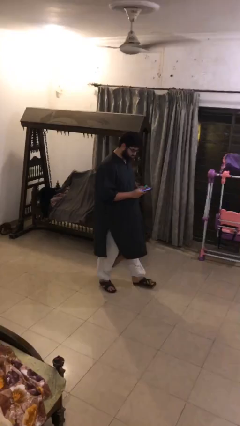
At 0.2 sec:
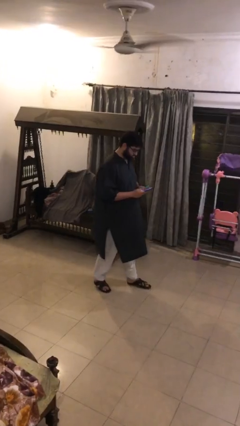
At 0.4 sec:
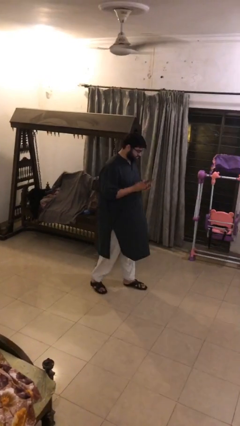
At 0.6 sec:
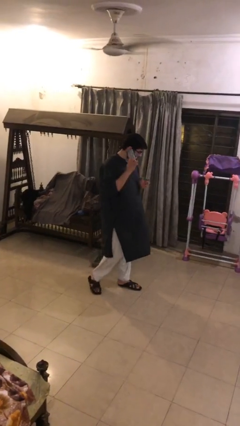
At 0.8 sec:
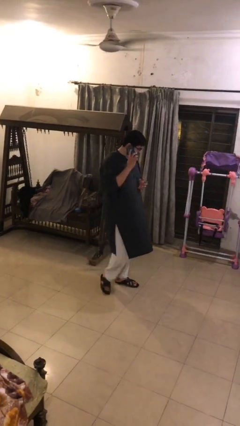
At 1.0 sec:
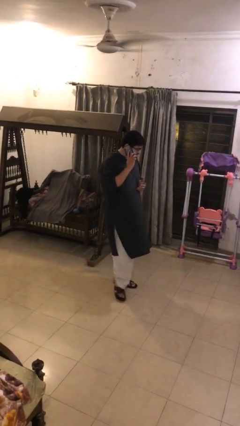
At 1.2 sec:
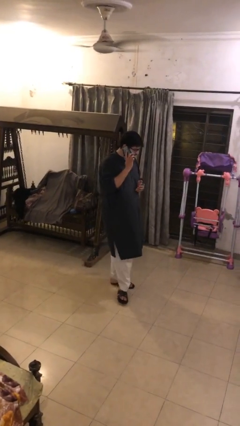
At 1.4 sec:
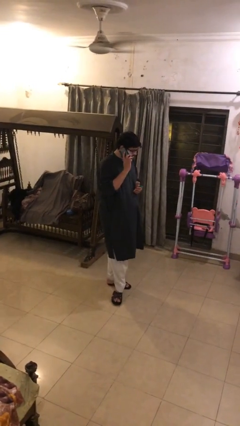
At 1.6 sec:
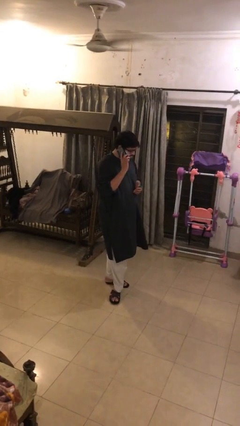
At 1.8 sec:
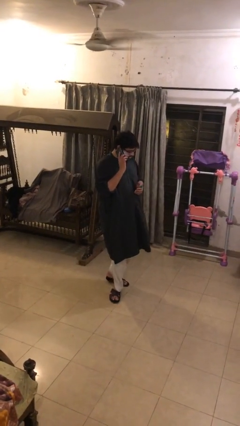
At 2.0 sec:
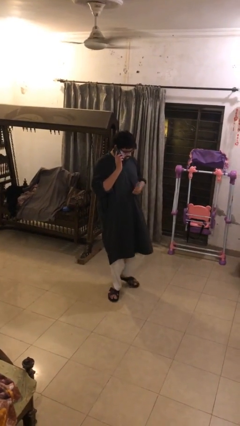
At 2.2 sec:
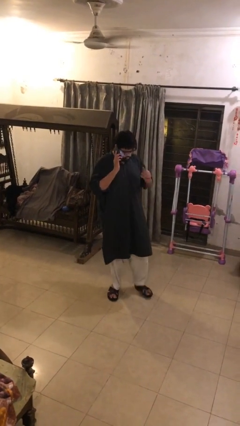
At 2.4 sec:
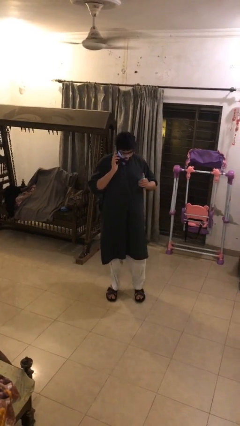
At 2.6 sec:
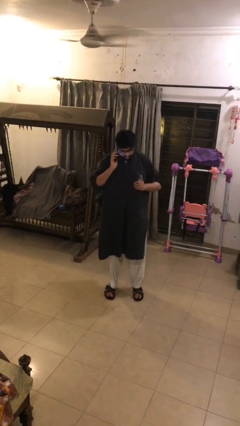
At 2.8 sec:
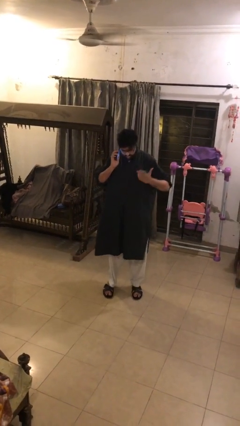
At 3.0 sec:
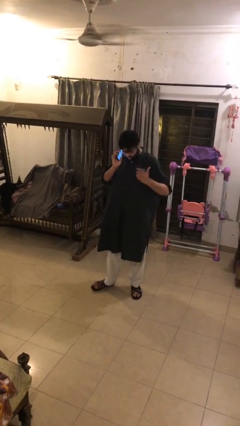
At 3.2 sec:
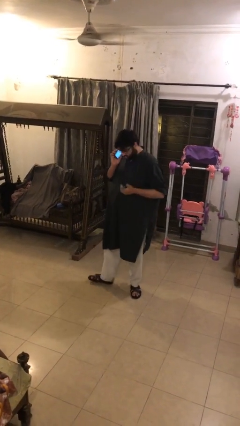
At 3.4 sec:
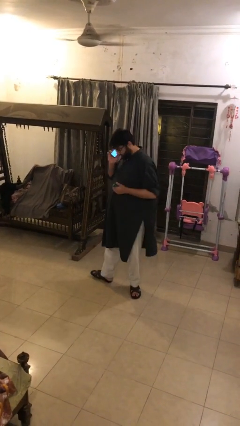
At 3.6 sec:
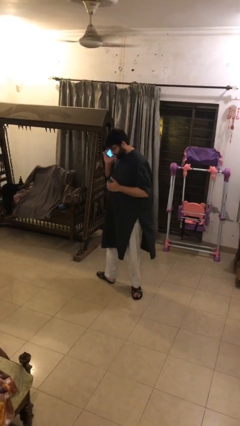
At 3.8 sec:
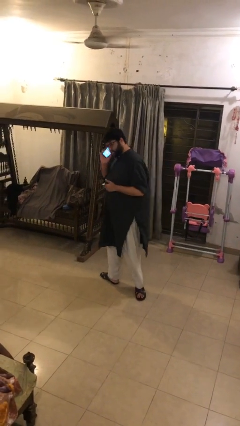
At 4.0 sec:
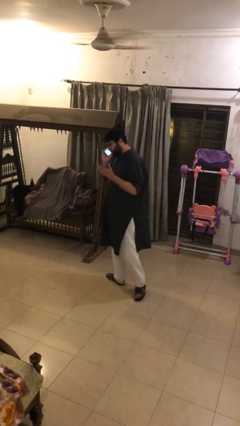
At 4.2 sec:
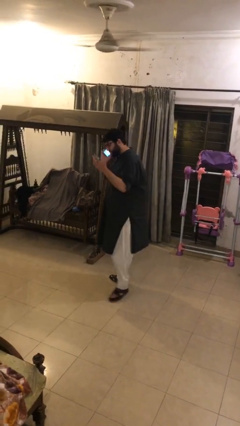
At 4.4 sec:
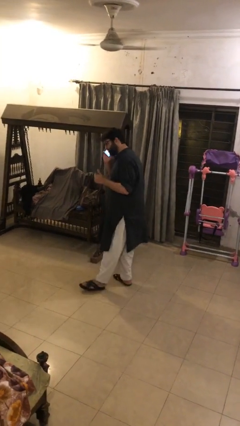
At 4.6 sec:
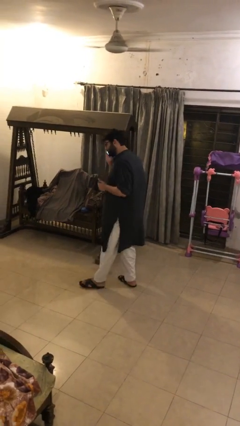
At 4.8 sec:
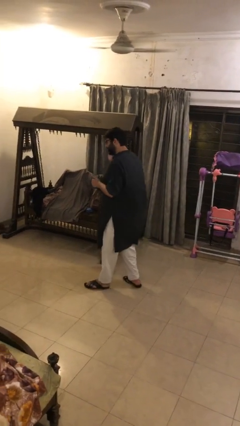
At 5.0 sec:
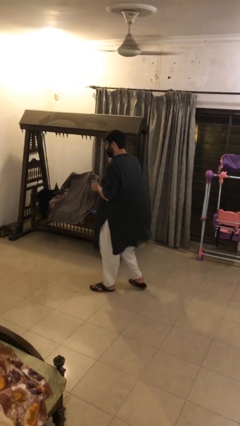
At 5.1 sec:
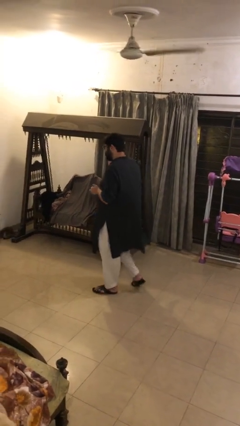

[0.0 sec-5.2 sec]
person talks on phone

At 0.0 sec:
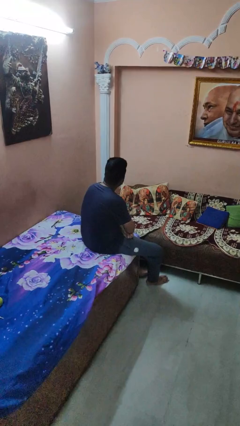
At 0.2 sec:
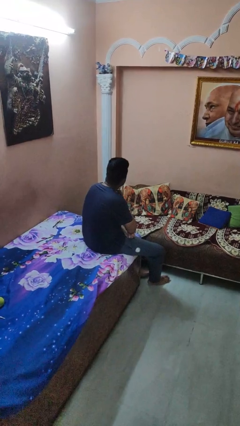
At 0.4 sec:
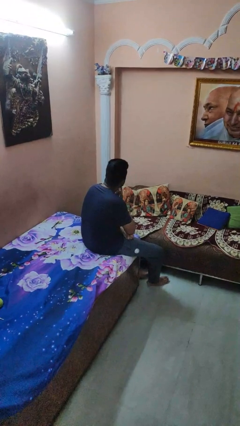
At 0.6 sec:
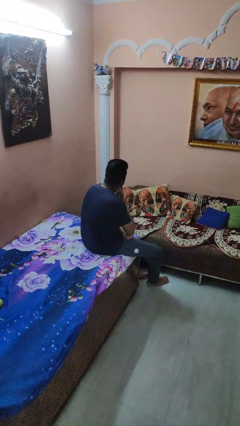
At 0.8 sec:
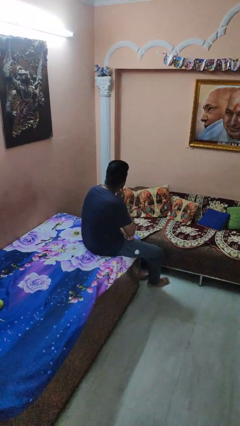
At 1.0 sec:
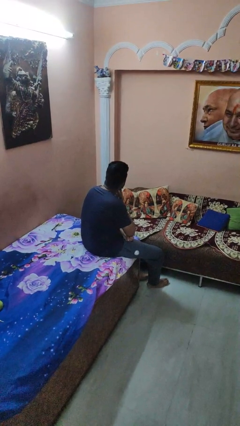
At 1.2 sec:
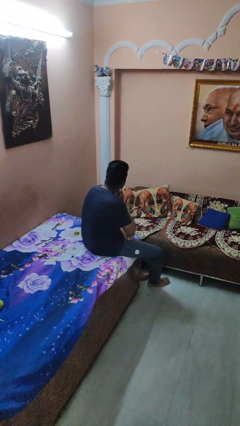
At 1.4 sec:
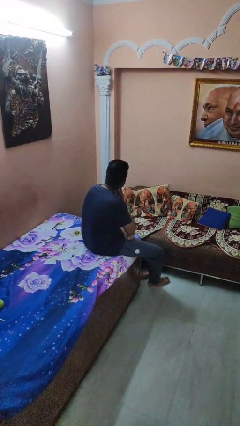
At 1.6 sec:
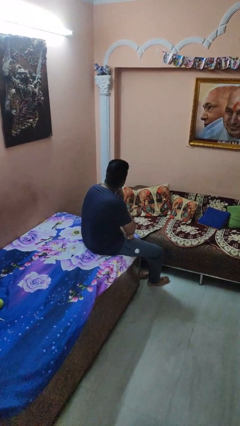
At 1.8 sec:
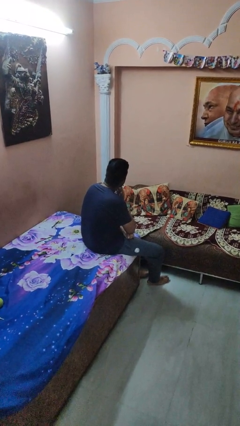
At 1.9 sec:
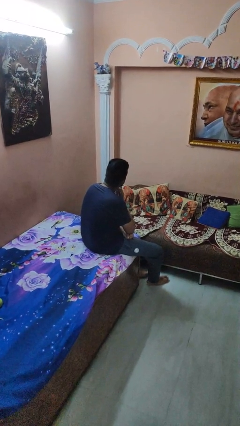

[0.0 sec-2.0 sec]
person strokes chin

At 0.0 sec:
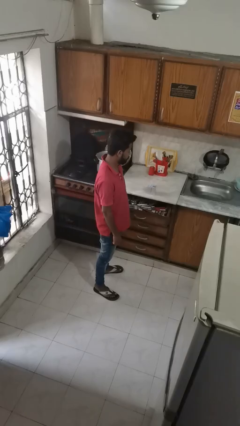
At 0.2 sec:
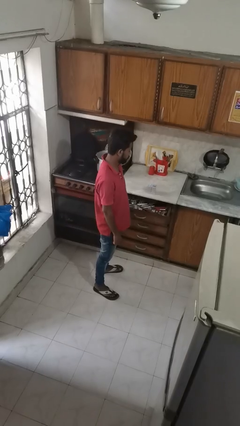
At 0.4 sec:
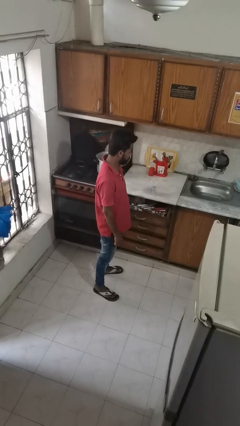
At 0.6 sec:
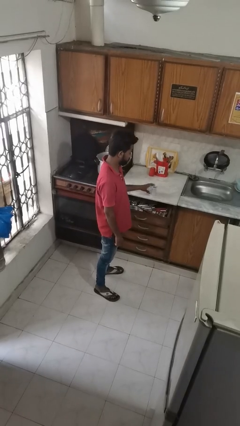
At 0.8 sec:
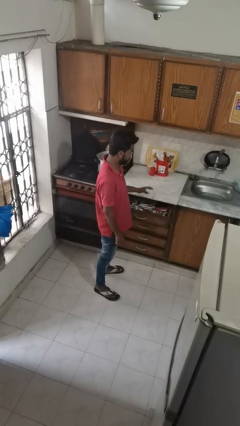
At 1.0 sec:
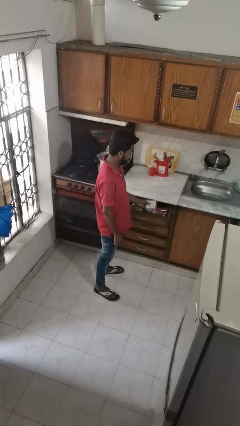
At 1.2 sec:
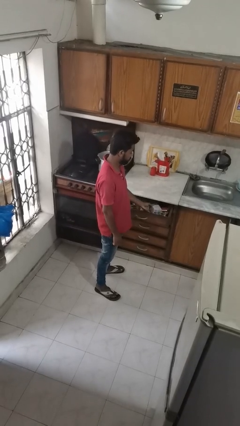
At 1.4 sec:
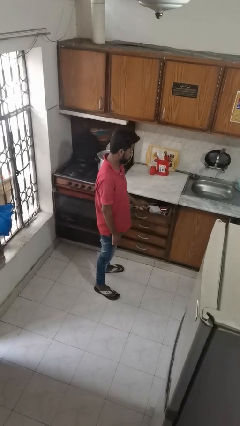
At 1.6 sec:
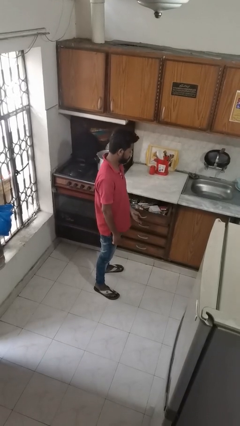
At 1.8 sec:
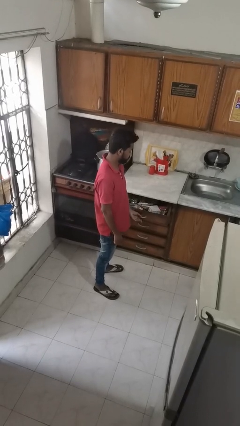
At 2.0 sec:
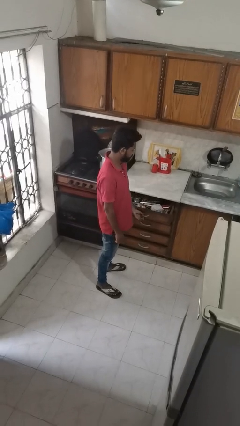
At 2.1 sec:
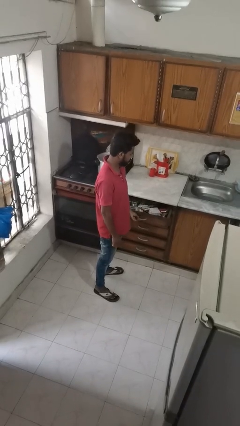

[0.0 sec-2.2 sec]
person puts object into kitchen drawer

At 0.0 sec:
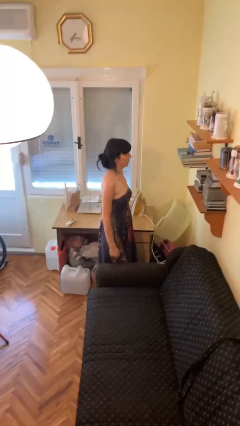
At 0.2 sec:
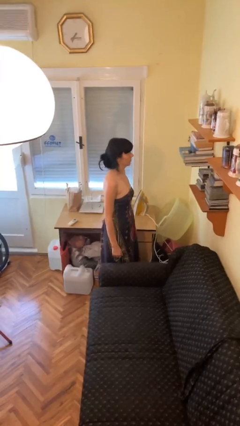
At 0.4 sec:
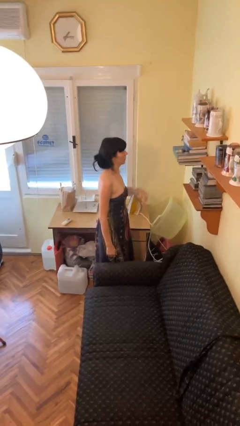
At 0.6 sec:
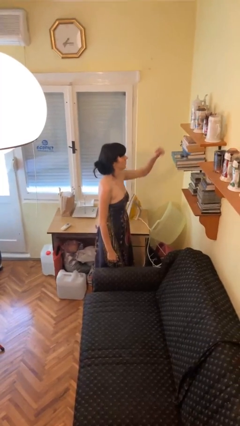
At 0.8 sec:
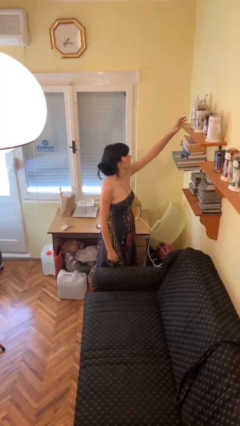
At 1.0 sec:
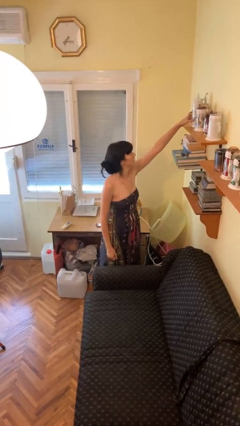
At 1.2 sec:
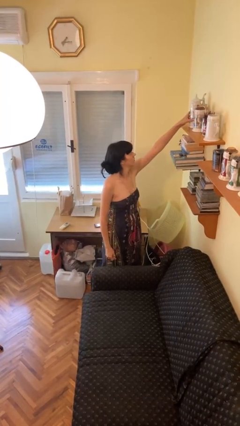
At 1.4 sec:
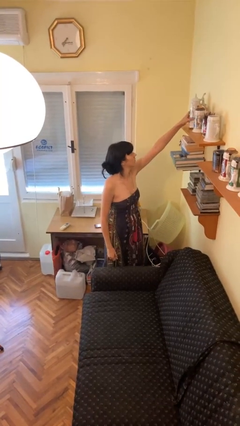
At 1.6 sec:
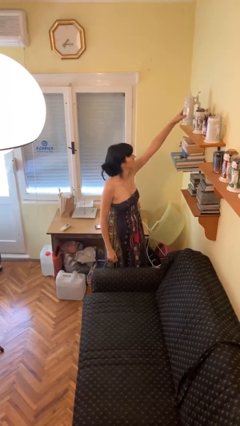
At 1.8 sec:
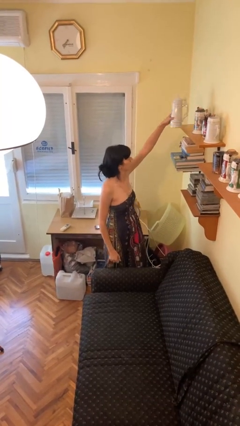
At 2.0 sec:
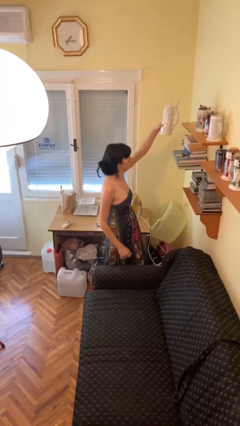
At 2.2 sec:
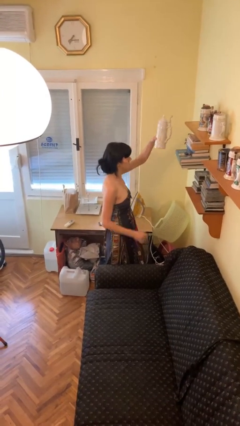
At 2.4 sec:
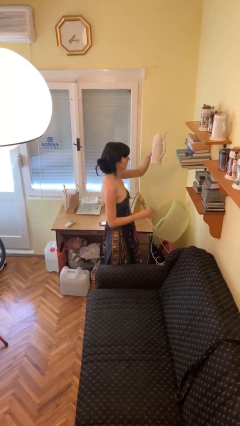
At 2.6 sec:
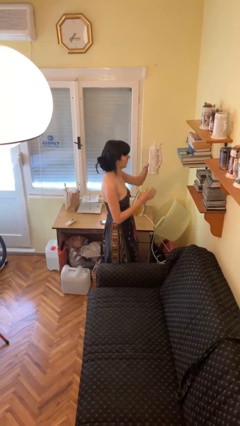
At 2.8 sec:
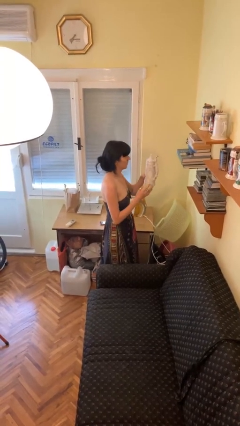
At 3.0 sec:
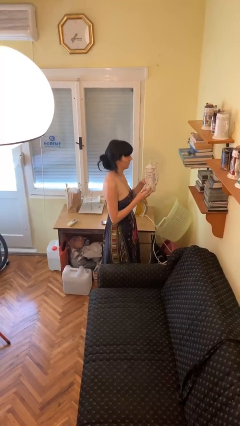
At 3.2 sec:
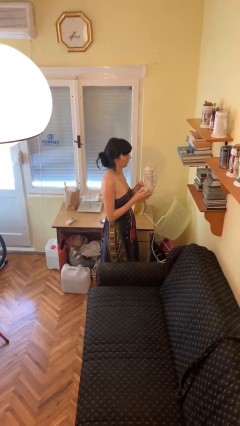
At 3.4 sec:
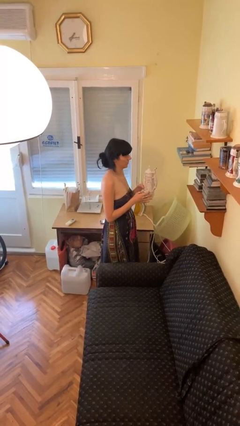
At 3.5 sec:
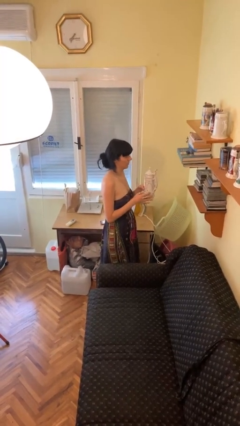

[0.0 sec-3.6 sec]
person picks up object from shelf

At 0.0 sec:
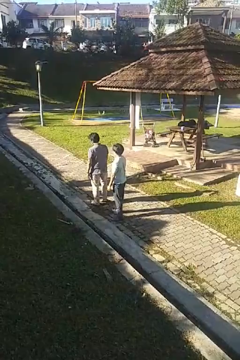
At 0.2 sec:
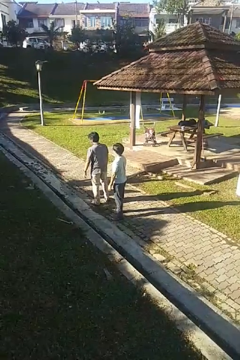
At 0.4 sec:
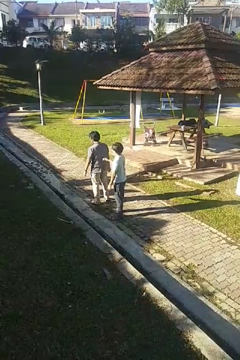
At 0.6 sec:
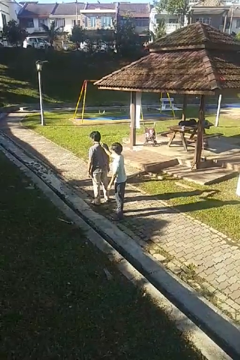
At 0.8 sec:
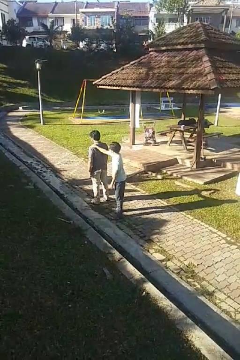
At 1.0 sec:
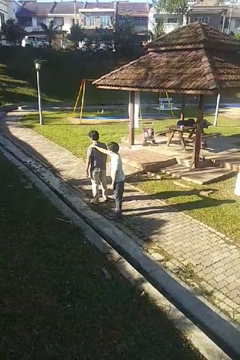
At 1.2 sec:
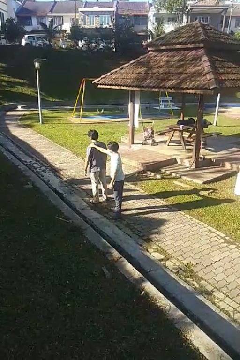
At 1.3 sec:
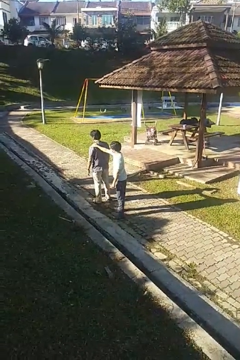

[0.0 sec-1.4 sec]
person grabs person by shoulder

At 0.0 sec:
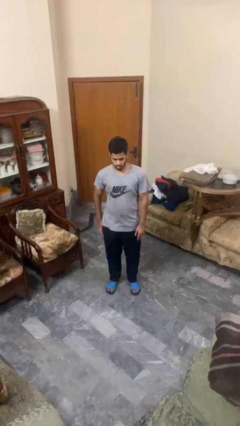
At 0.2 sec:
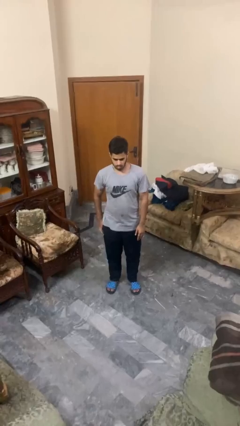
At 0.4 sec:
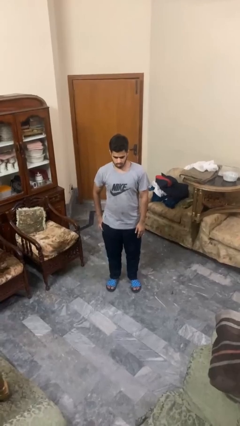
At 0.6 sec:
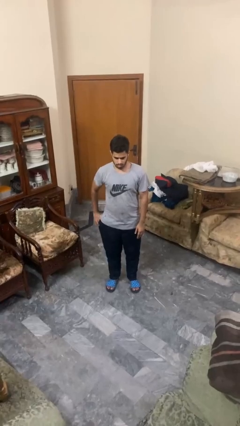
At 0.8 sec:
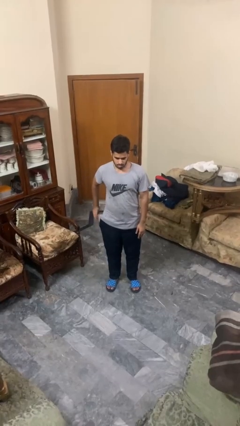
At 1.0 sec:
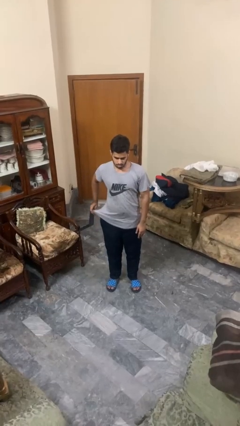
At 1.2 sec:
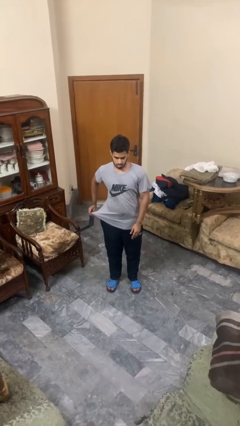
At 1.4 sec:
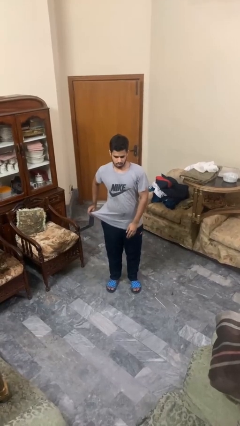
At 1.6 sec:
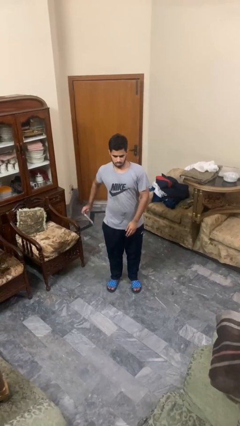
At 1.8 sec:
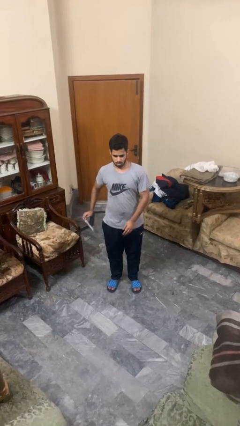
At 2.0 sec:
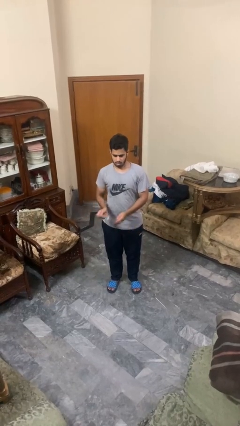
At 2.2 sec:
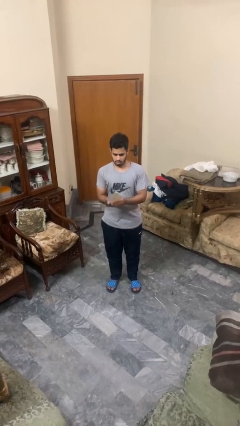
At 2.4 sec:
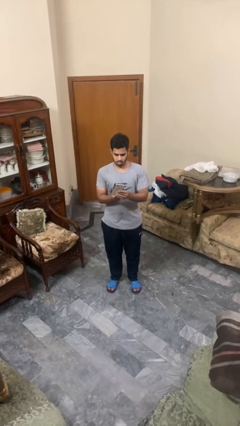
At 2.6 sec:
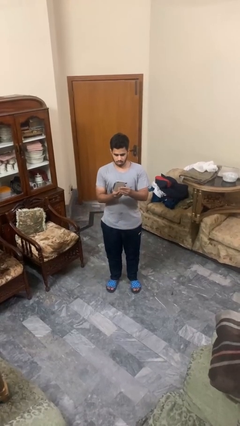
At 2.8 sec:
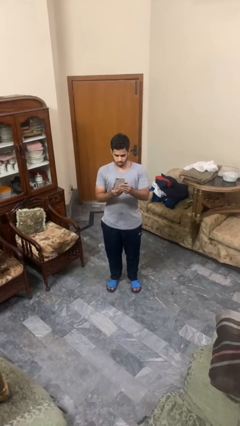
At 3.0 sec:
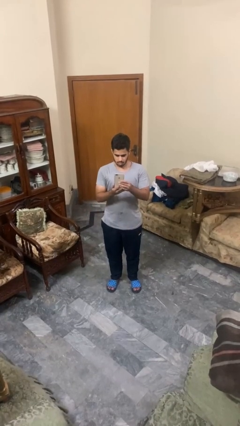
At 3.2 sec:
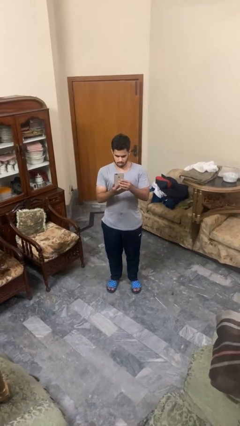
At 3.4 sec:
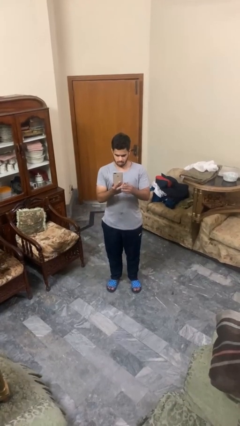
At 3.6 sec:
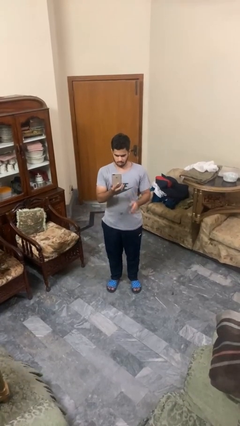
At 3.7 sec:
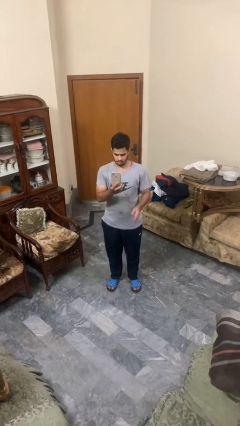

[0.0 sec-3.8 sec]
person takes phone from pocket
